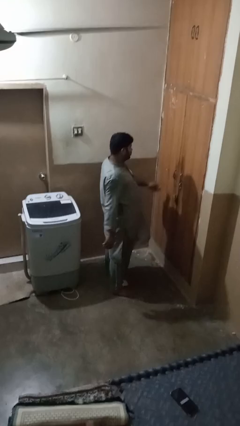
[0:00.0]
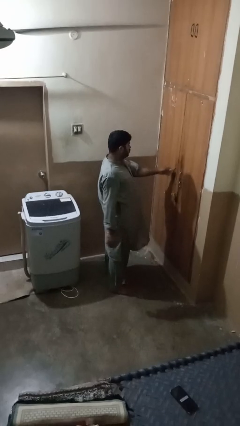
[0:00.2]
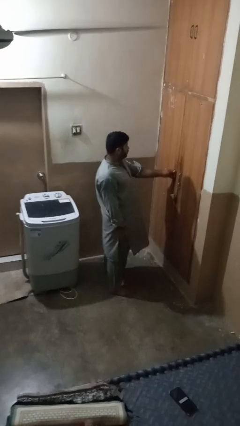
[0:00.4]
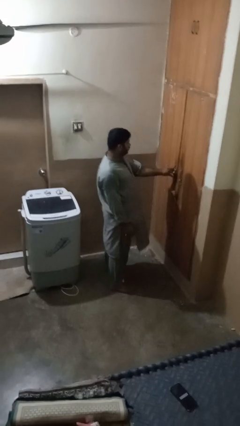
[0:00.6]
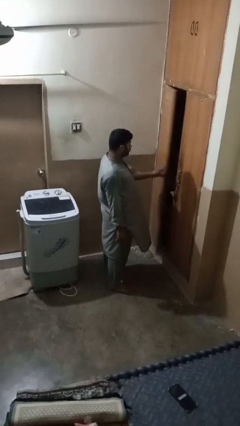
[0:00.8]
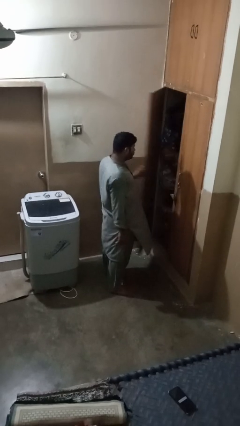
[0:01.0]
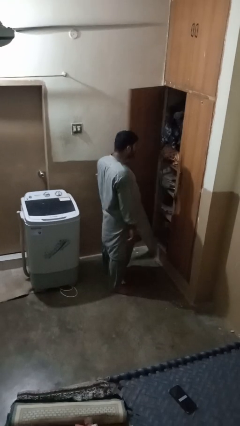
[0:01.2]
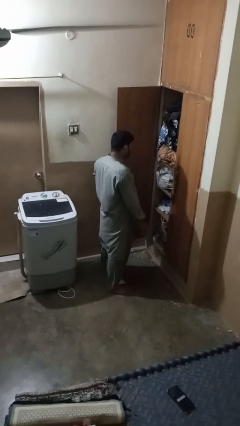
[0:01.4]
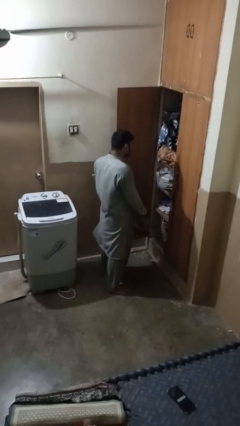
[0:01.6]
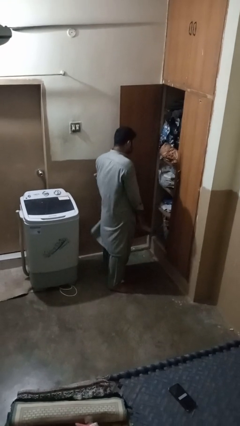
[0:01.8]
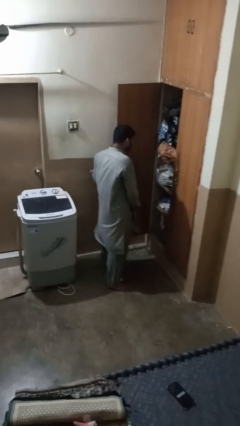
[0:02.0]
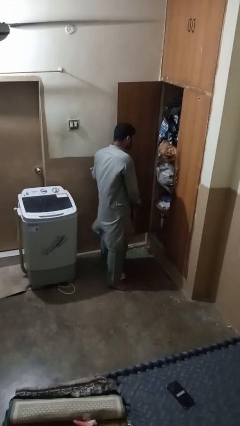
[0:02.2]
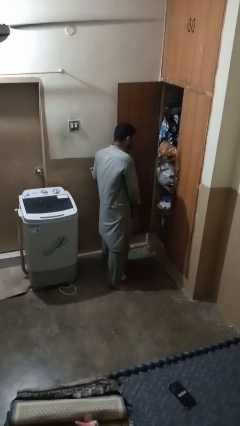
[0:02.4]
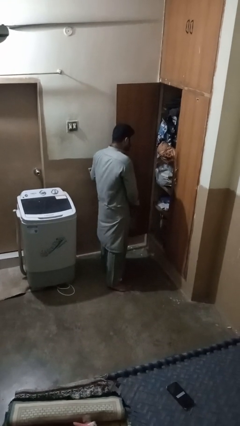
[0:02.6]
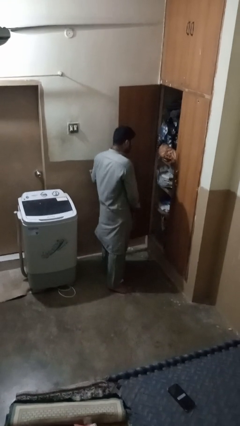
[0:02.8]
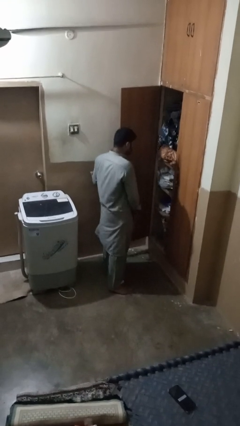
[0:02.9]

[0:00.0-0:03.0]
person opens closet door

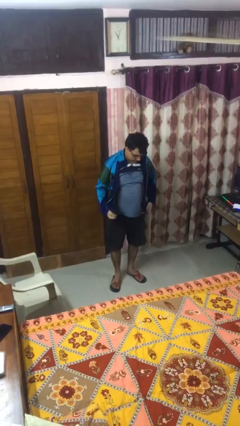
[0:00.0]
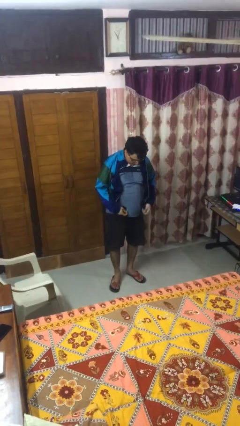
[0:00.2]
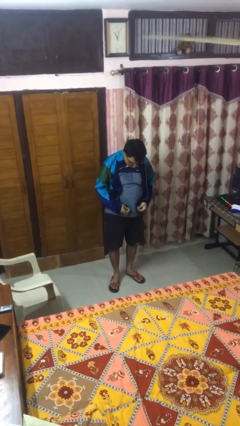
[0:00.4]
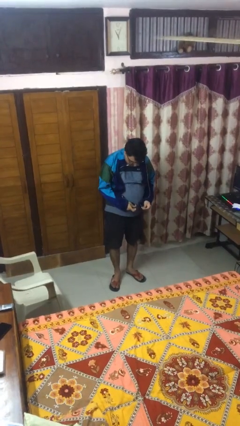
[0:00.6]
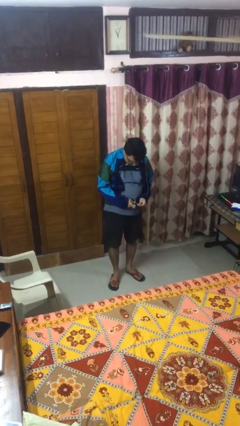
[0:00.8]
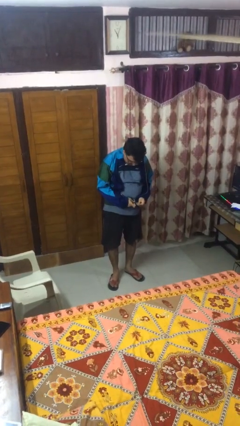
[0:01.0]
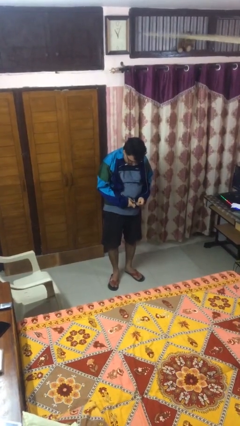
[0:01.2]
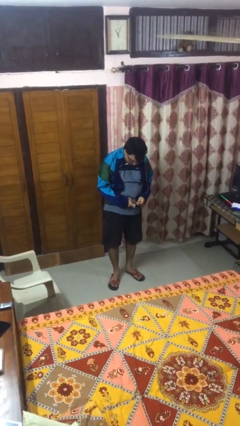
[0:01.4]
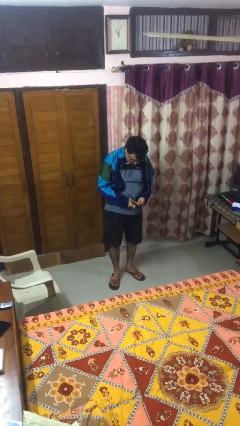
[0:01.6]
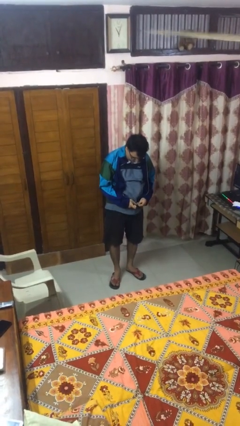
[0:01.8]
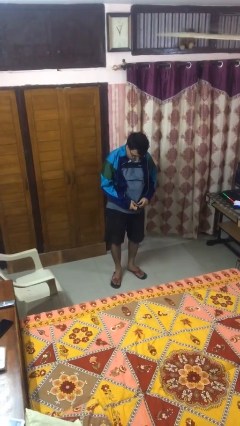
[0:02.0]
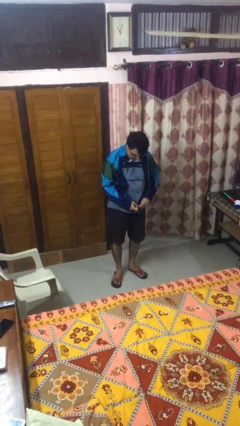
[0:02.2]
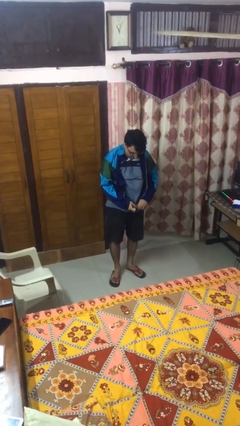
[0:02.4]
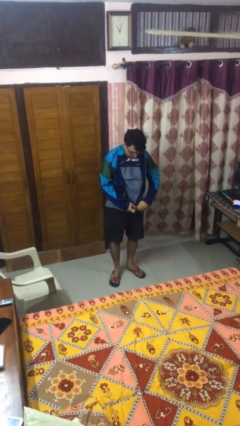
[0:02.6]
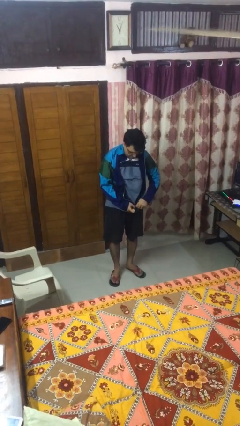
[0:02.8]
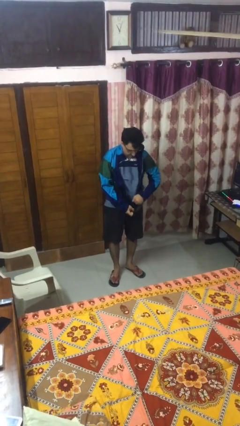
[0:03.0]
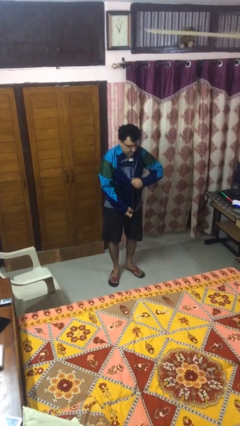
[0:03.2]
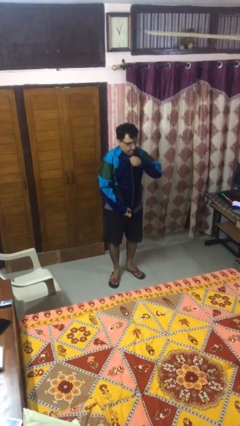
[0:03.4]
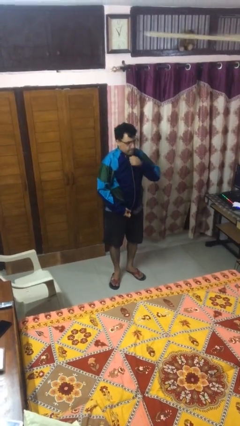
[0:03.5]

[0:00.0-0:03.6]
person zips up jacket

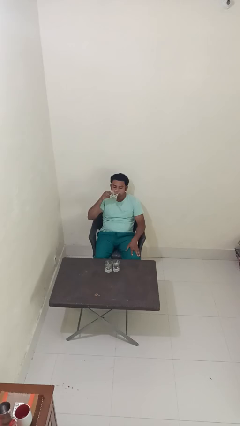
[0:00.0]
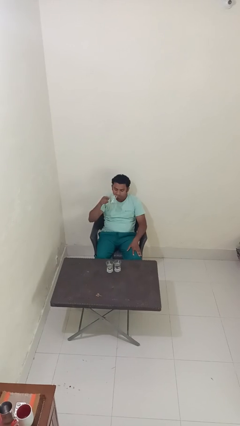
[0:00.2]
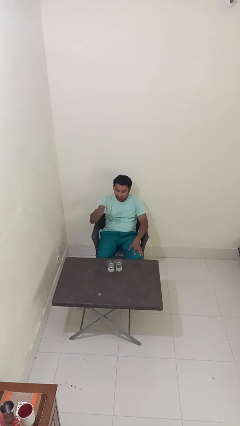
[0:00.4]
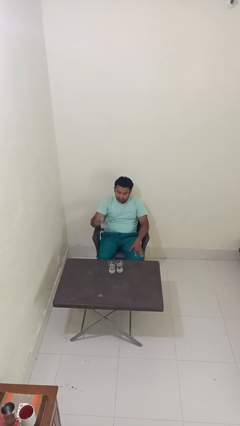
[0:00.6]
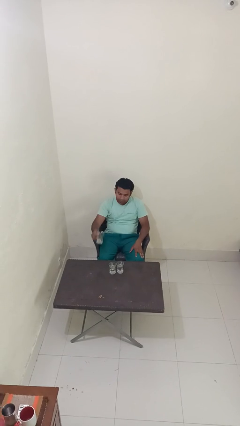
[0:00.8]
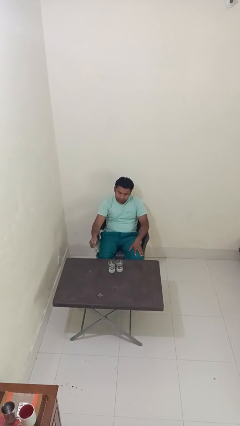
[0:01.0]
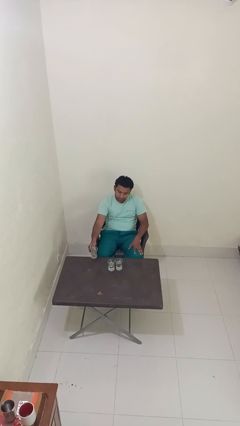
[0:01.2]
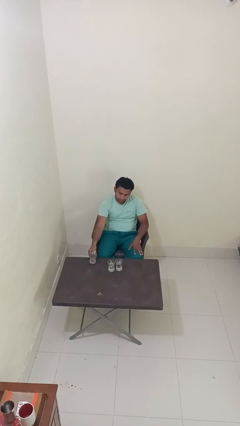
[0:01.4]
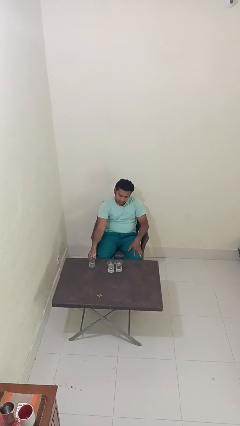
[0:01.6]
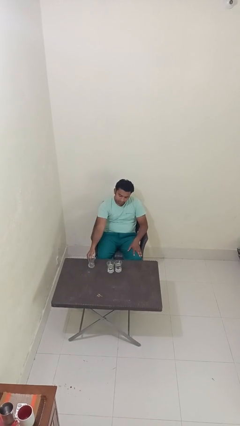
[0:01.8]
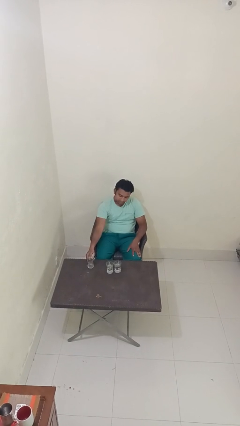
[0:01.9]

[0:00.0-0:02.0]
person puts down object on table

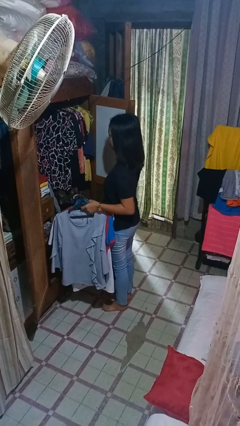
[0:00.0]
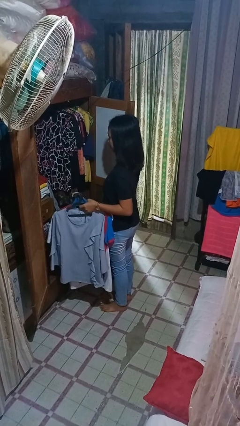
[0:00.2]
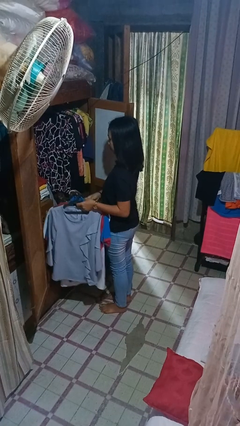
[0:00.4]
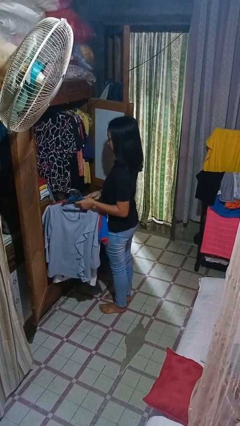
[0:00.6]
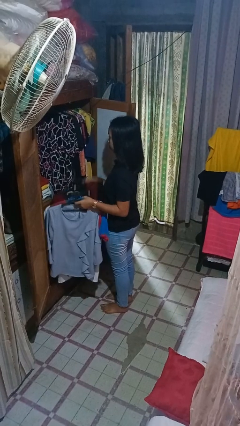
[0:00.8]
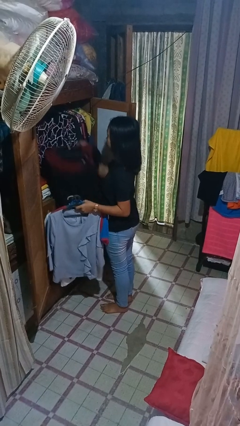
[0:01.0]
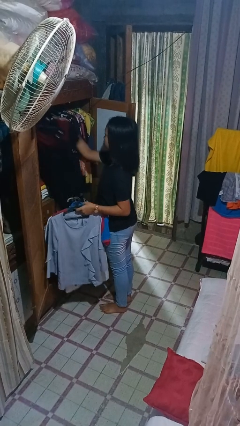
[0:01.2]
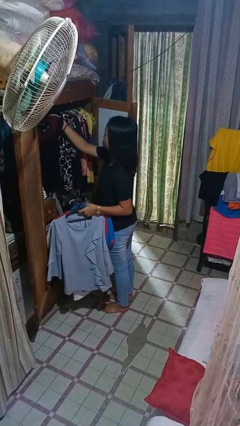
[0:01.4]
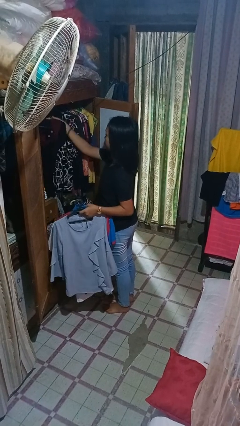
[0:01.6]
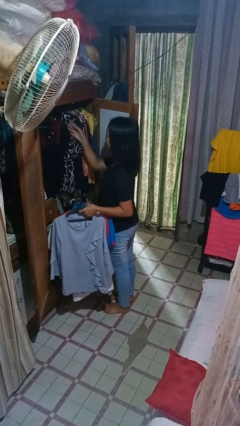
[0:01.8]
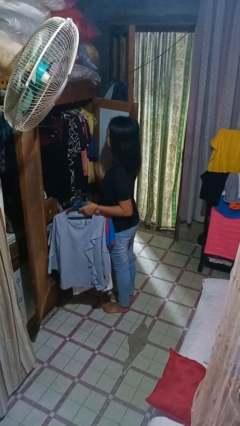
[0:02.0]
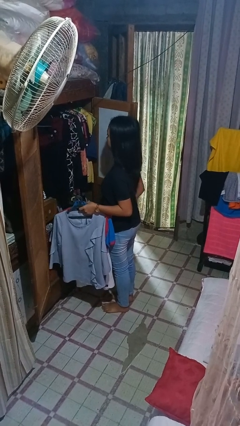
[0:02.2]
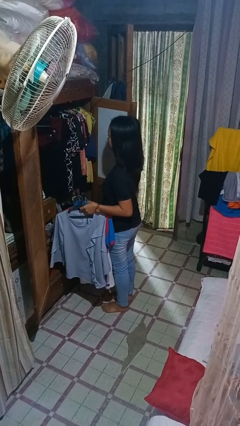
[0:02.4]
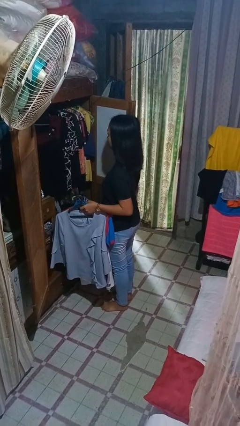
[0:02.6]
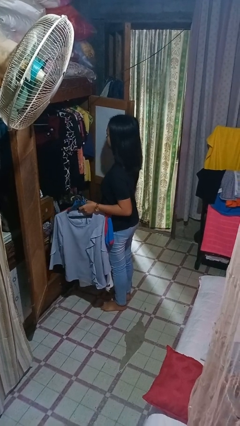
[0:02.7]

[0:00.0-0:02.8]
person puts clothes into closet

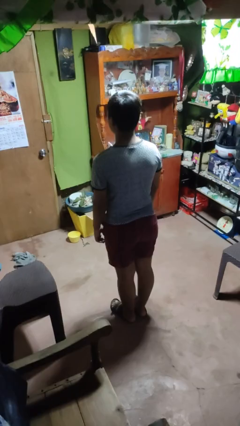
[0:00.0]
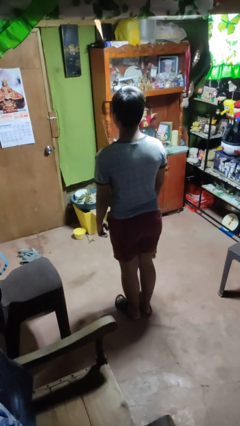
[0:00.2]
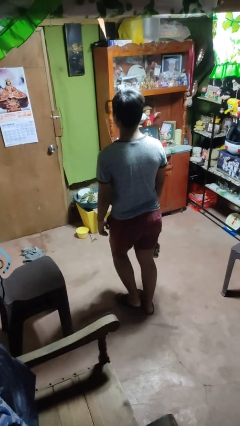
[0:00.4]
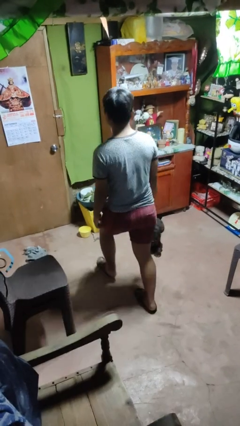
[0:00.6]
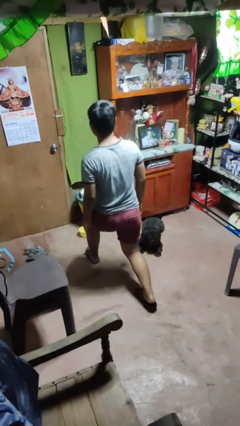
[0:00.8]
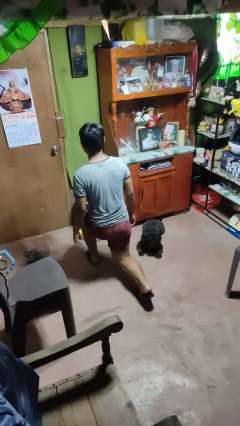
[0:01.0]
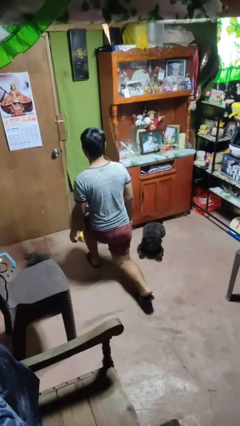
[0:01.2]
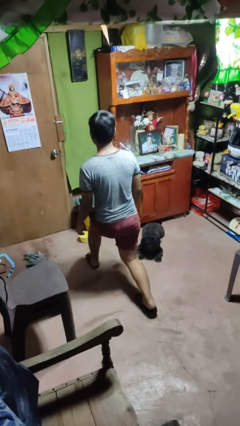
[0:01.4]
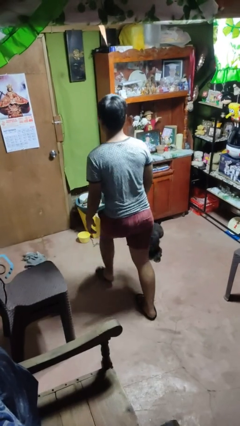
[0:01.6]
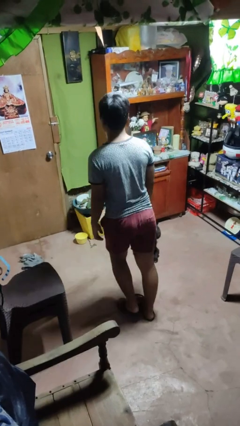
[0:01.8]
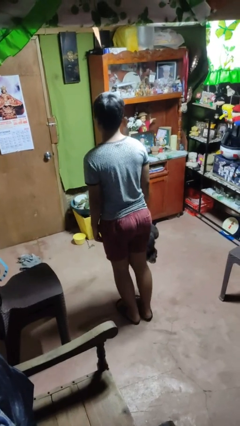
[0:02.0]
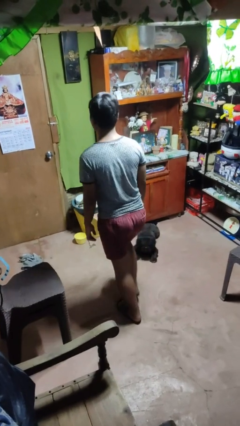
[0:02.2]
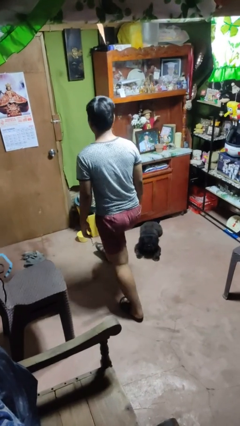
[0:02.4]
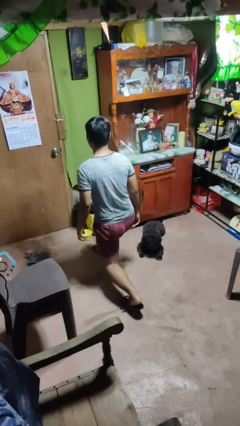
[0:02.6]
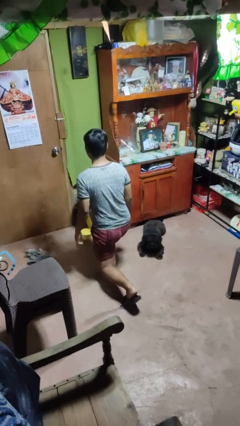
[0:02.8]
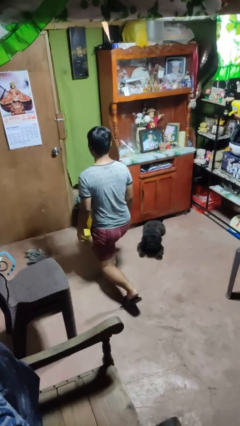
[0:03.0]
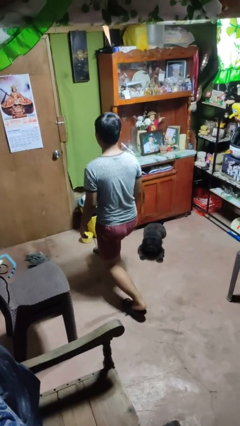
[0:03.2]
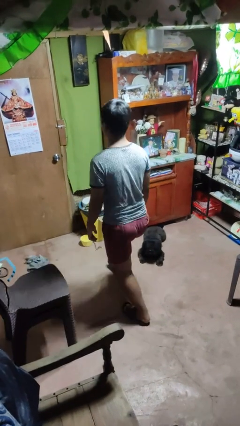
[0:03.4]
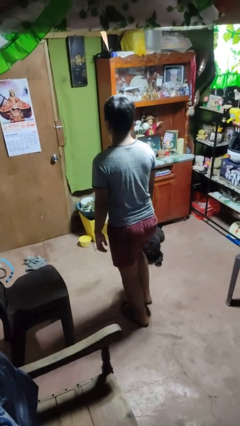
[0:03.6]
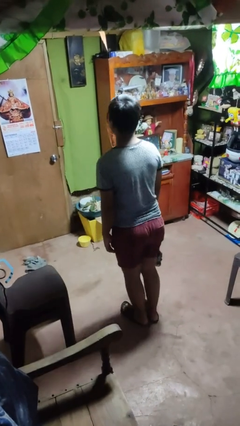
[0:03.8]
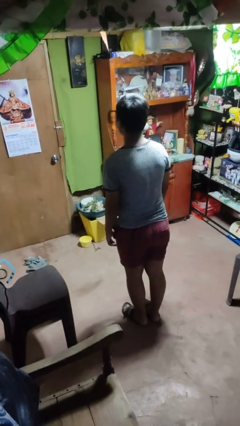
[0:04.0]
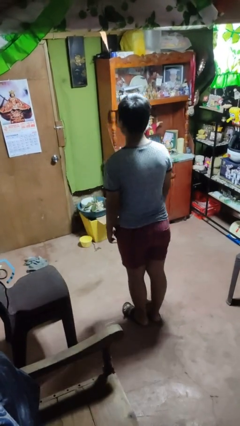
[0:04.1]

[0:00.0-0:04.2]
person exercises with lunges

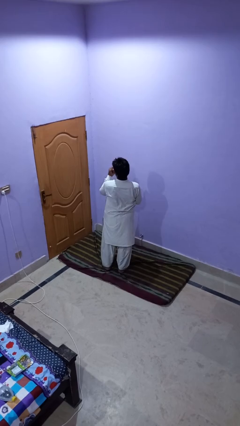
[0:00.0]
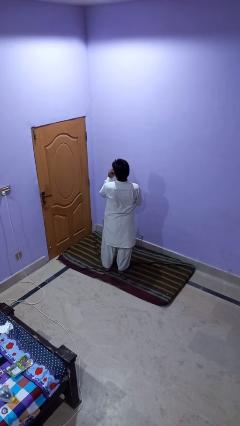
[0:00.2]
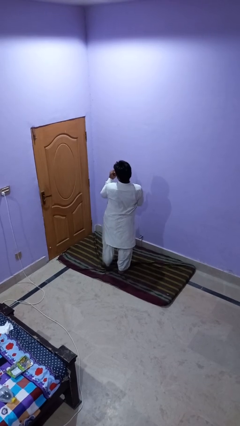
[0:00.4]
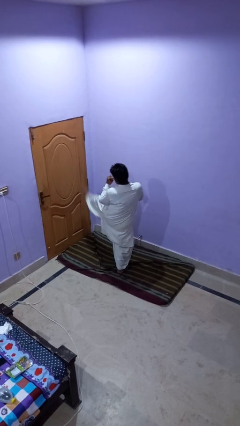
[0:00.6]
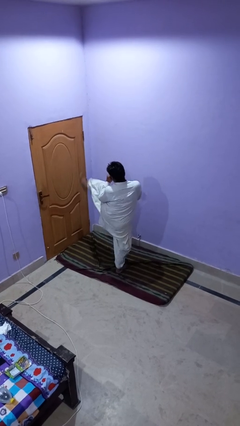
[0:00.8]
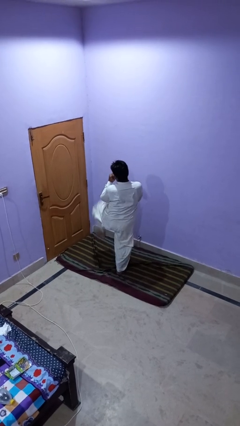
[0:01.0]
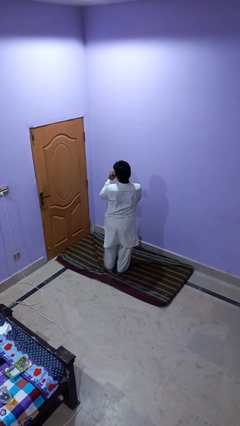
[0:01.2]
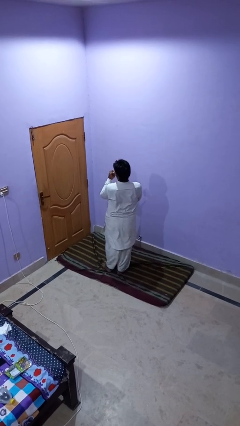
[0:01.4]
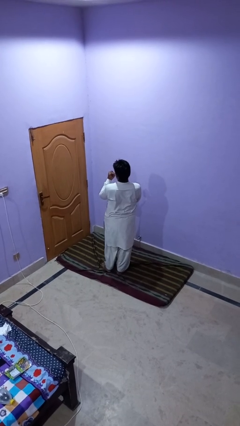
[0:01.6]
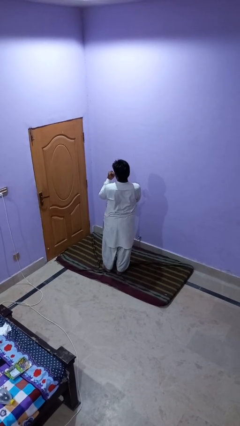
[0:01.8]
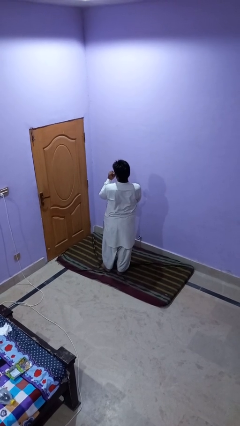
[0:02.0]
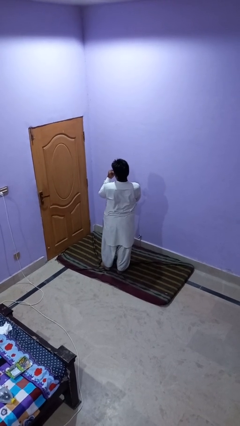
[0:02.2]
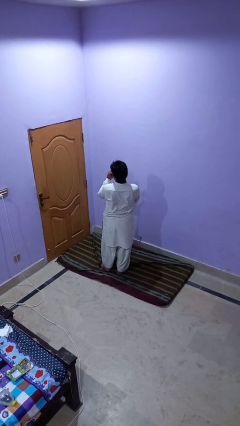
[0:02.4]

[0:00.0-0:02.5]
person karate kicks
